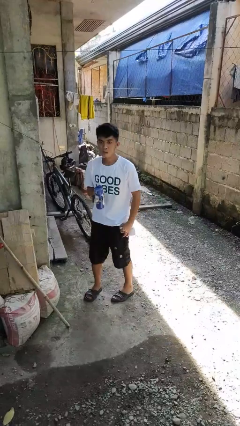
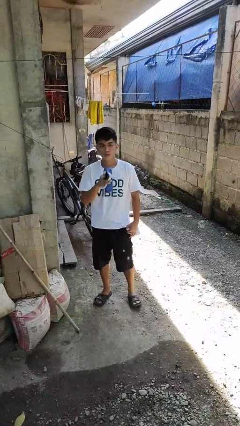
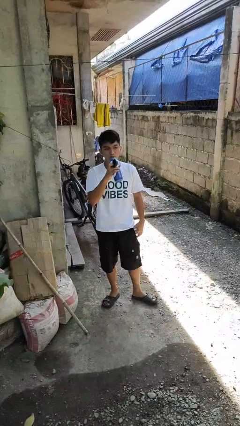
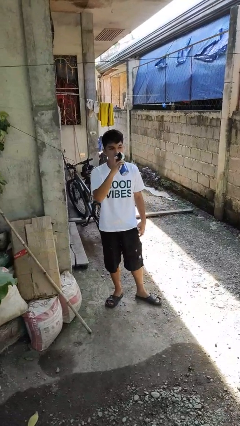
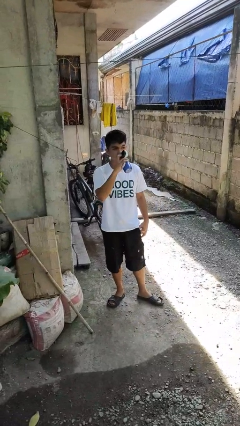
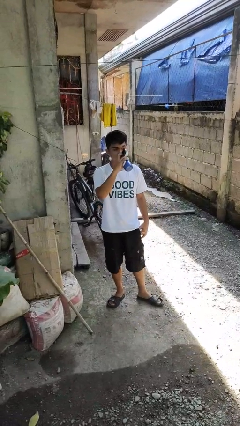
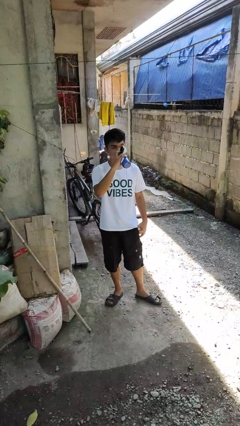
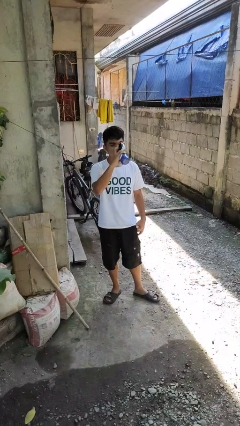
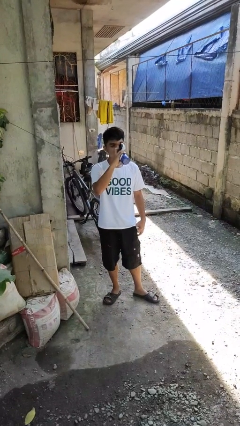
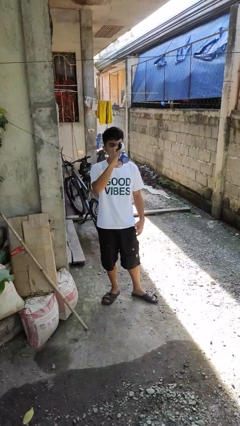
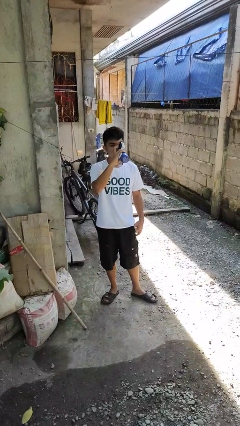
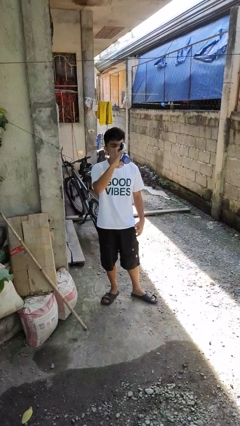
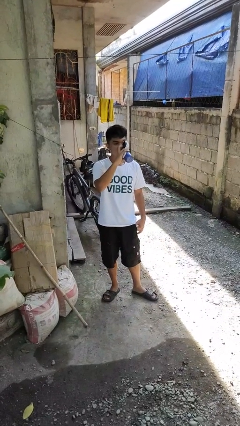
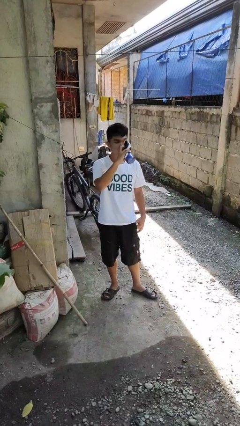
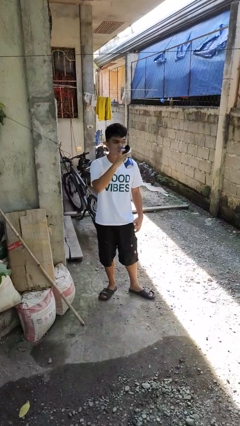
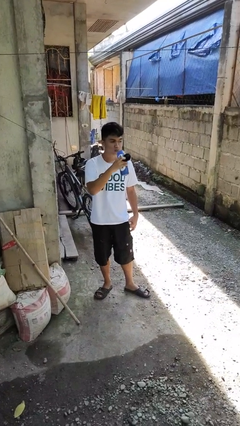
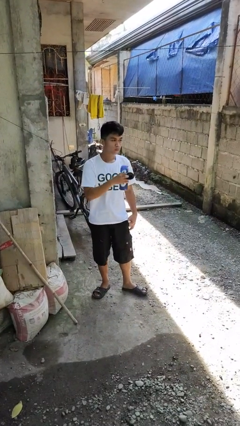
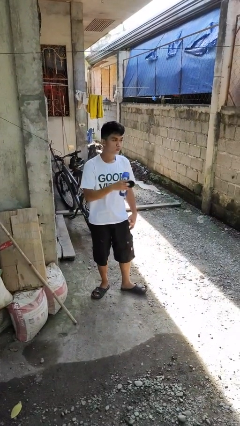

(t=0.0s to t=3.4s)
person drinks from bottle

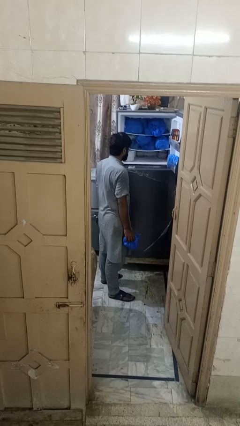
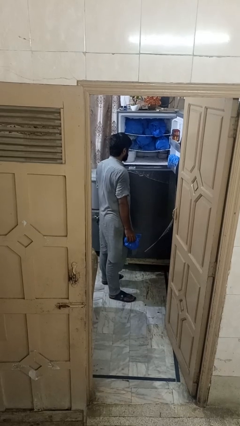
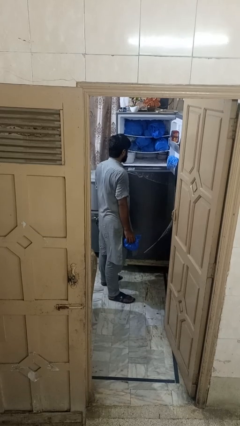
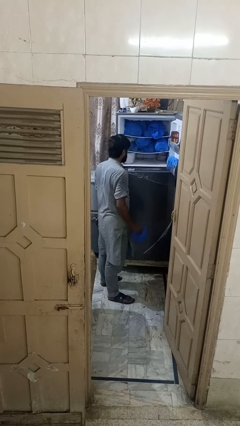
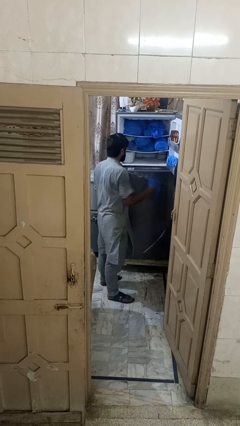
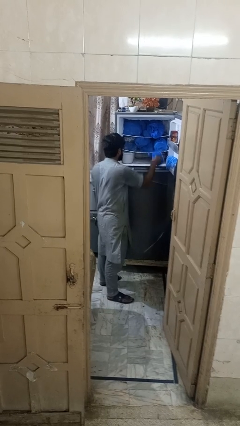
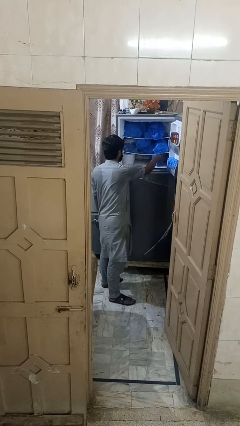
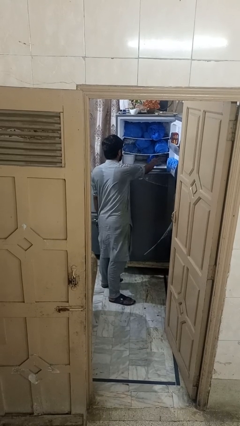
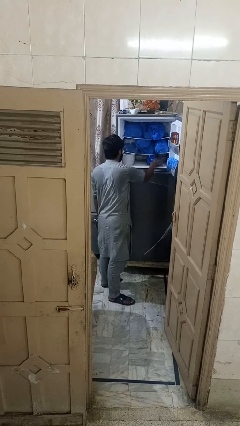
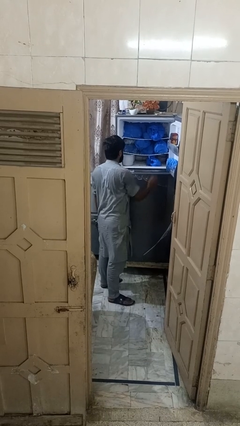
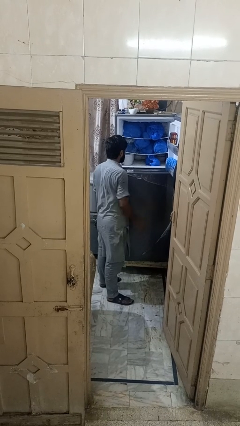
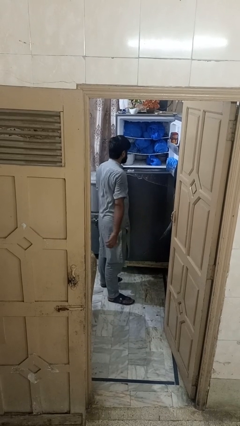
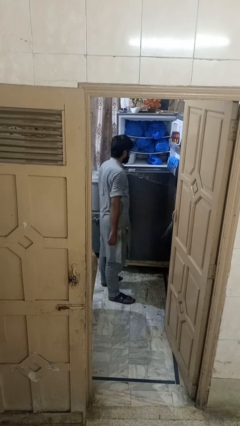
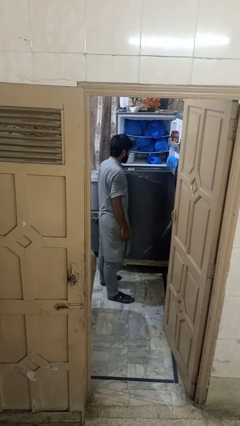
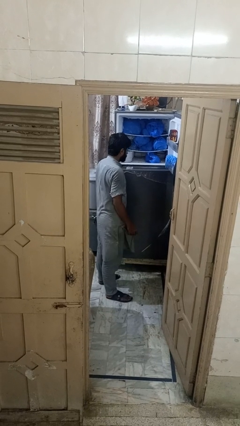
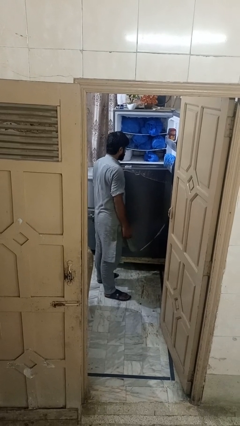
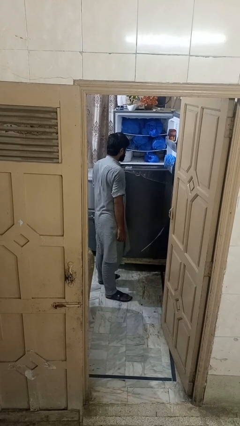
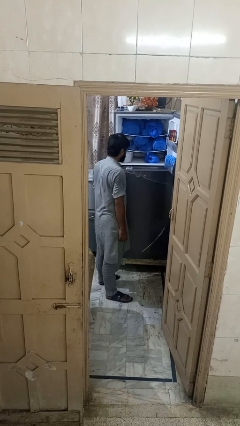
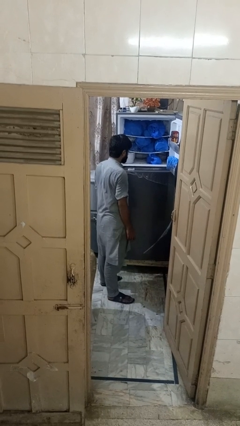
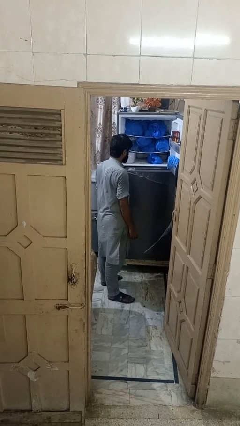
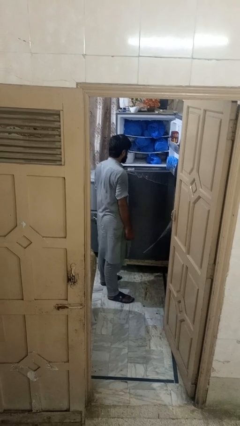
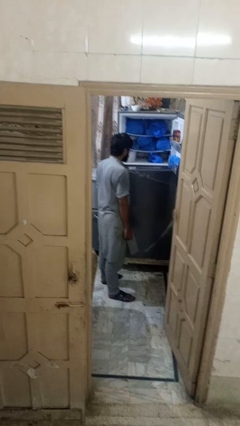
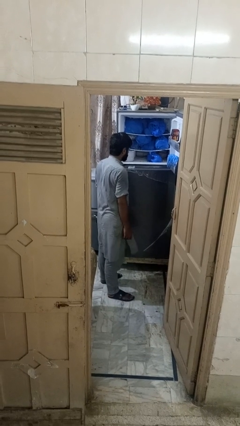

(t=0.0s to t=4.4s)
person loads groceries into refrigerator

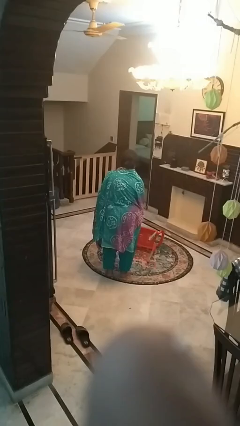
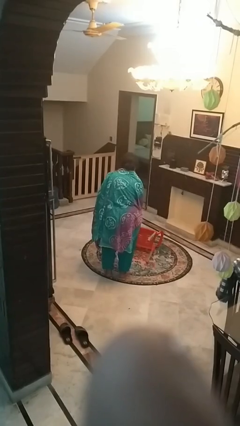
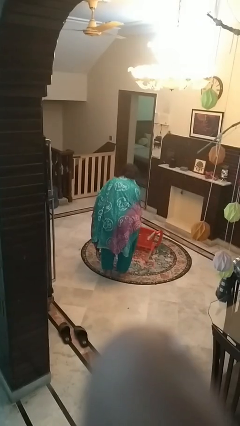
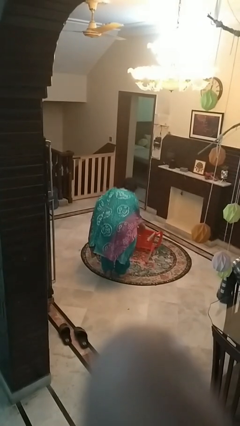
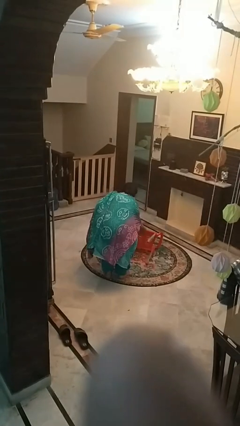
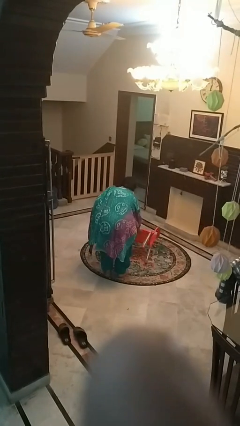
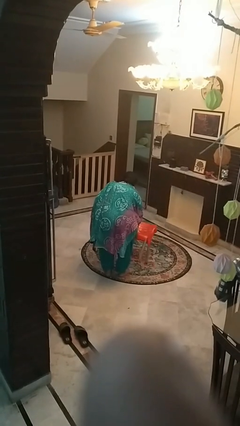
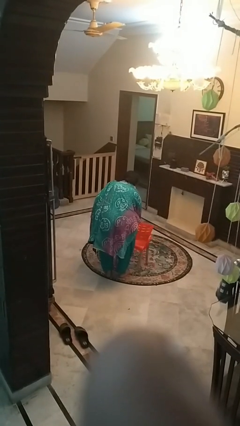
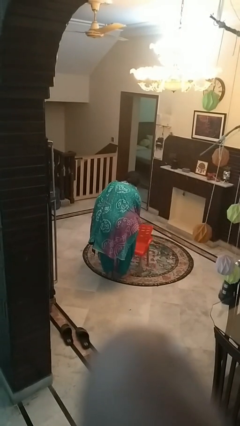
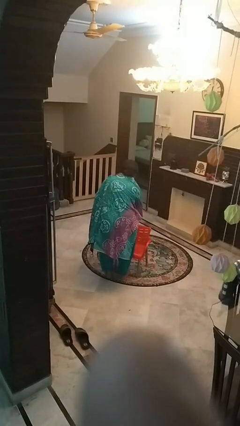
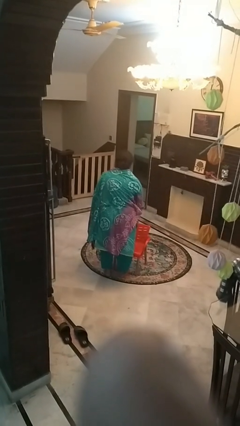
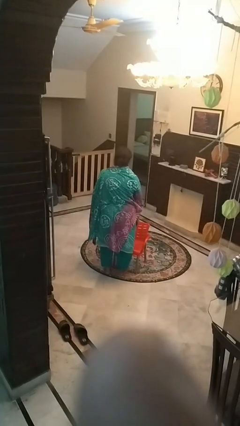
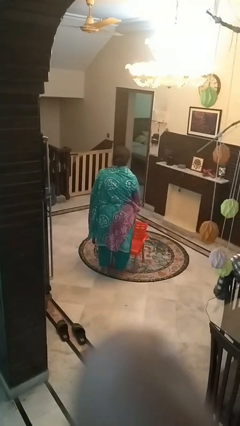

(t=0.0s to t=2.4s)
person sets upright furniture

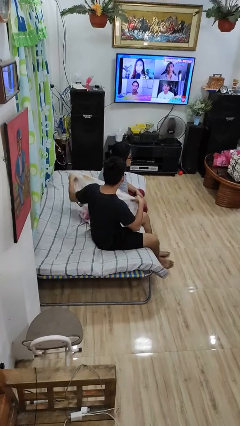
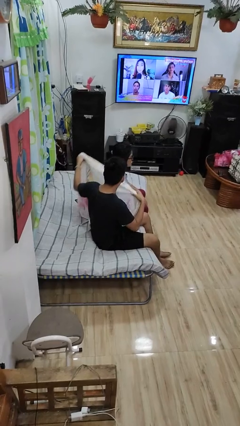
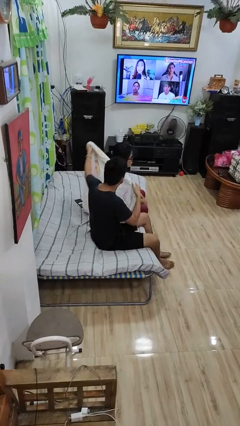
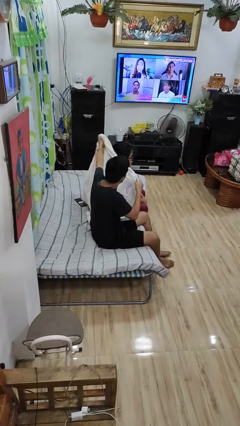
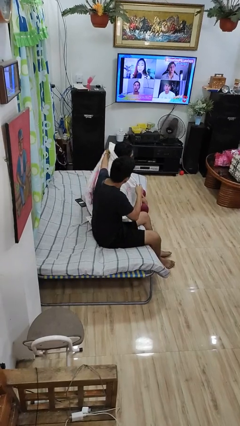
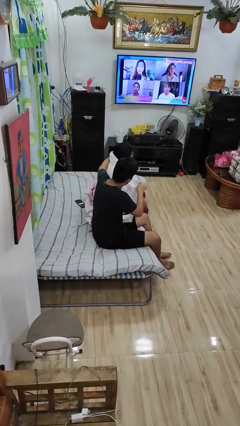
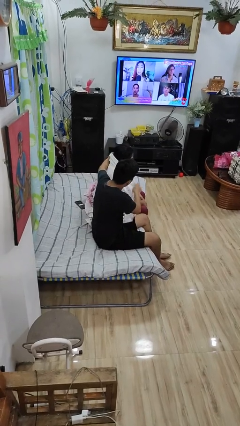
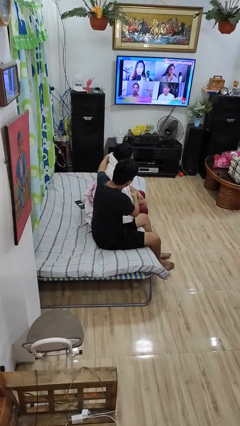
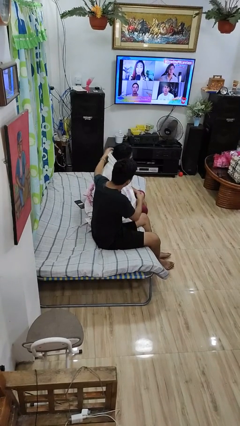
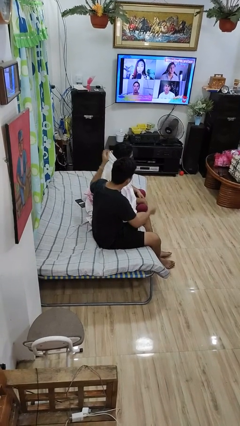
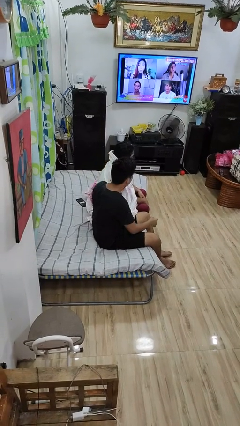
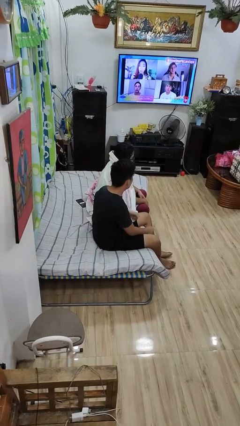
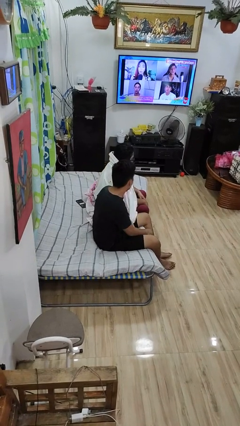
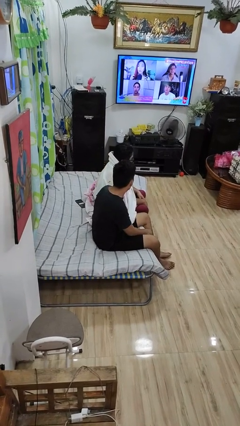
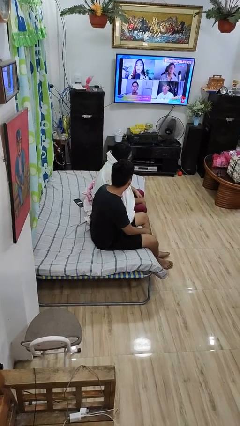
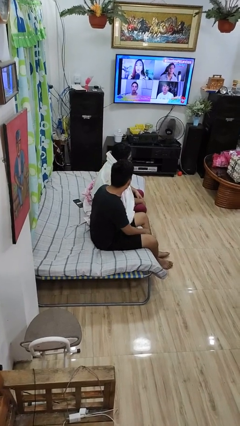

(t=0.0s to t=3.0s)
person covers friend with blanket

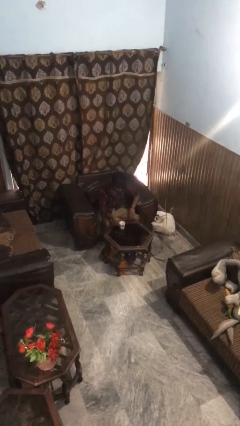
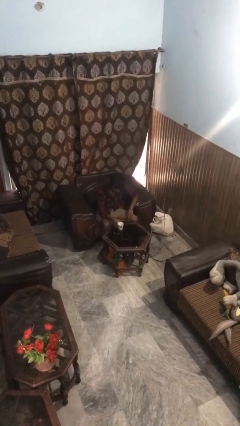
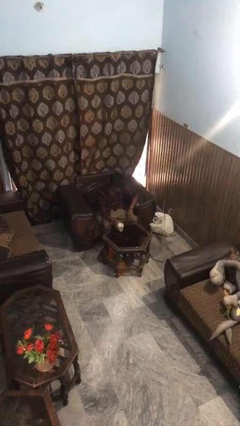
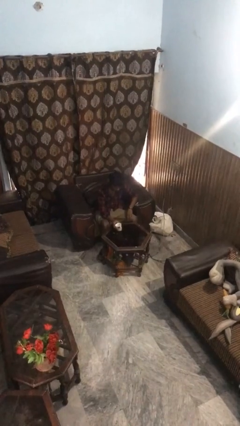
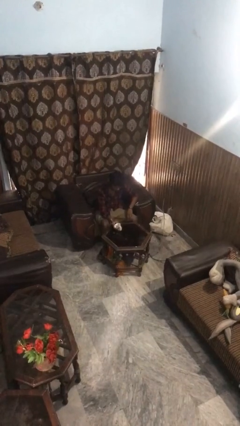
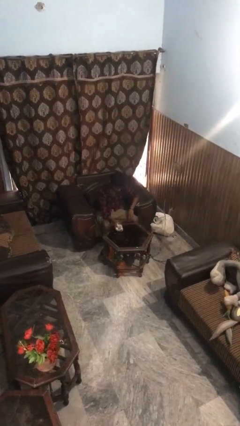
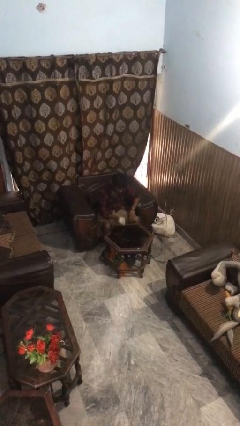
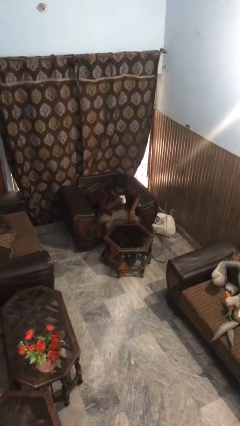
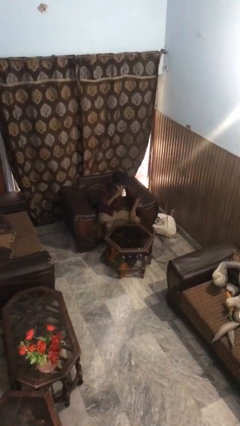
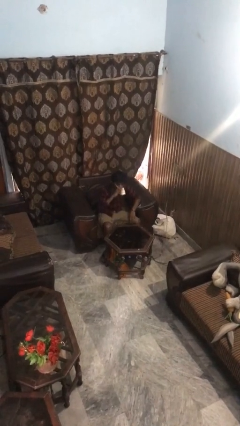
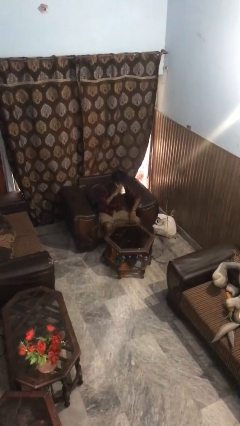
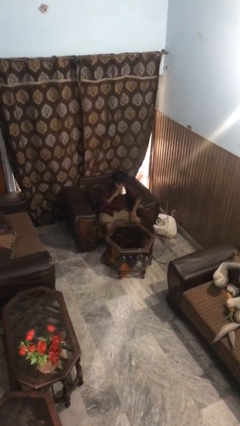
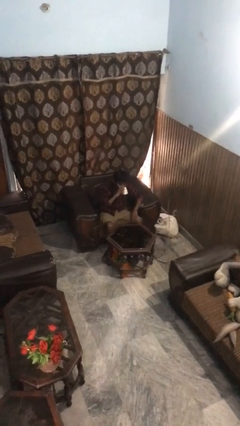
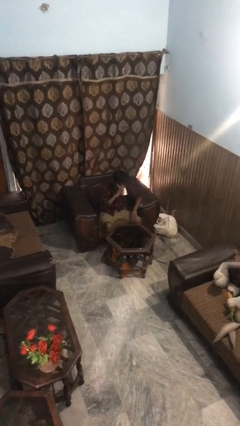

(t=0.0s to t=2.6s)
person drinks from mug

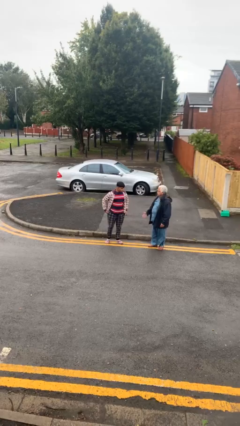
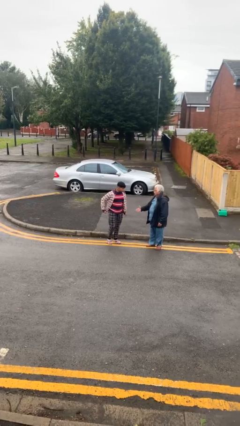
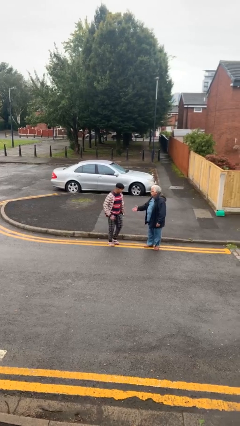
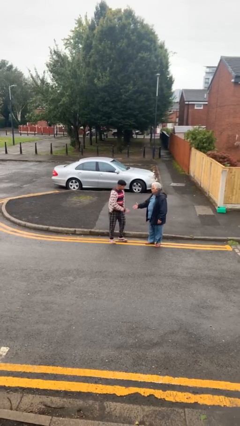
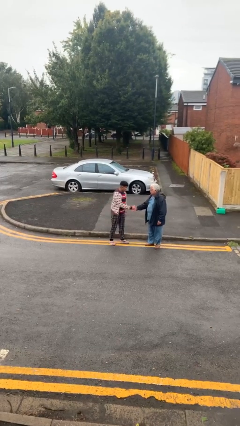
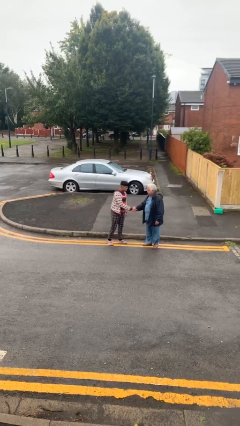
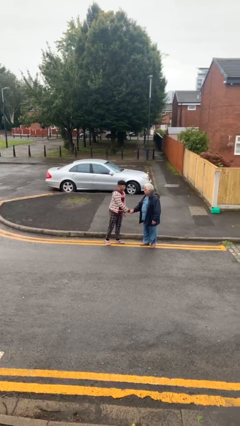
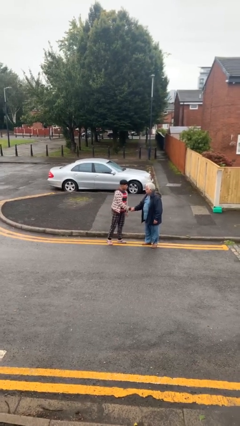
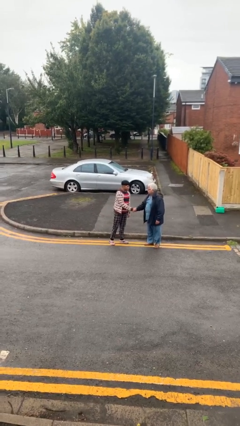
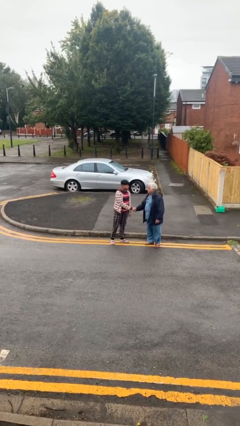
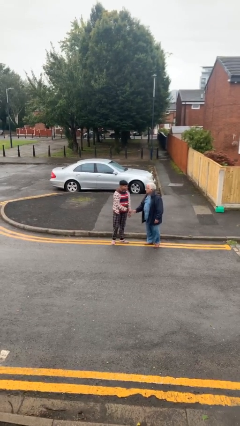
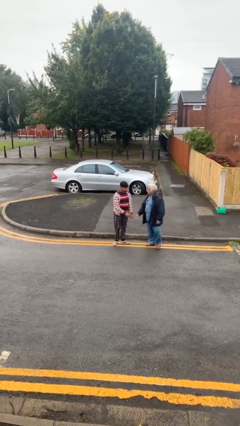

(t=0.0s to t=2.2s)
person shakes hand
